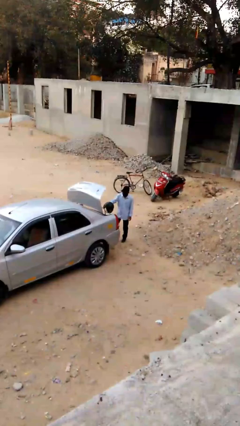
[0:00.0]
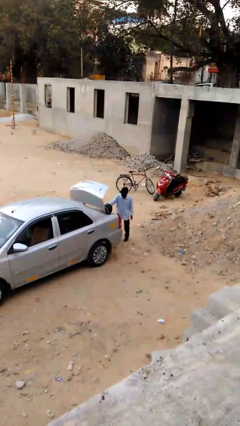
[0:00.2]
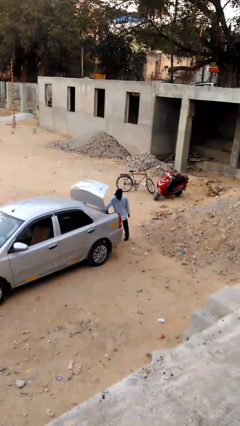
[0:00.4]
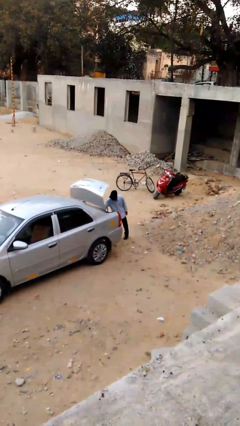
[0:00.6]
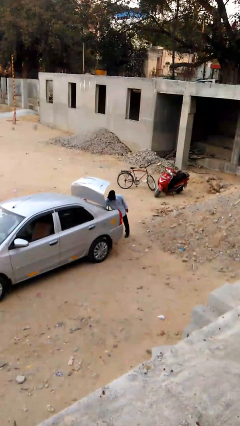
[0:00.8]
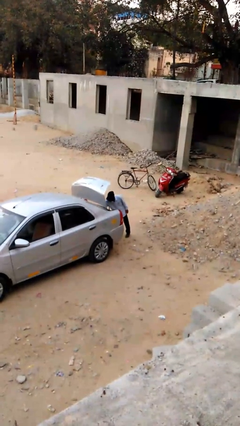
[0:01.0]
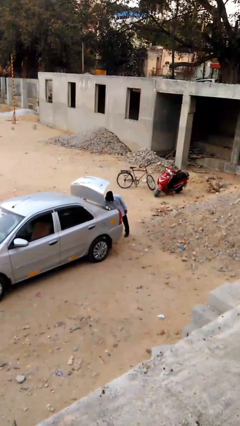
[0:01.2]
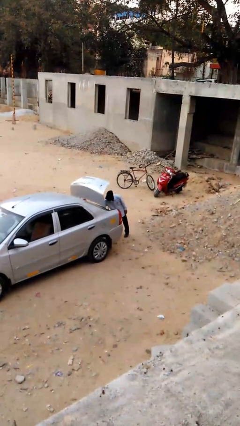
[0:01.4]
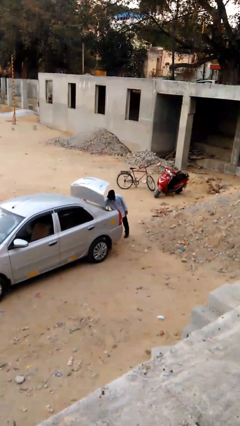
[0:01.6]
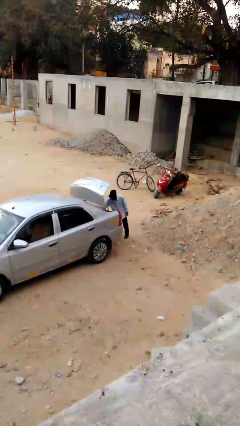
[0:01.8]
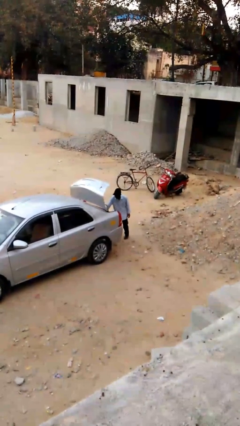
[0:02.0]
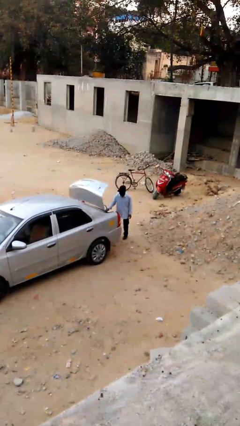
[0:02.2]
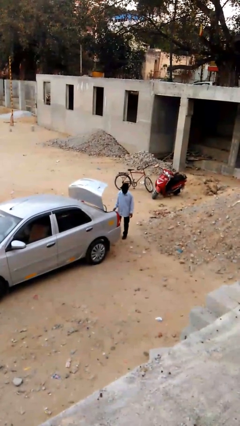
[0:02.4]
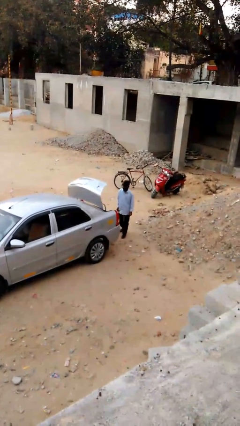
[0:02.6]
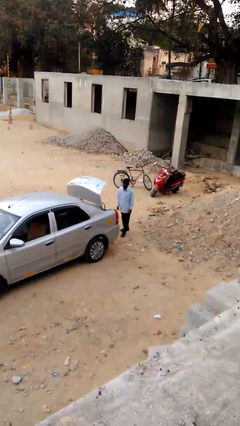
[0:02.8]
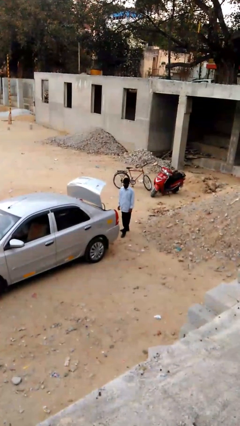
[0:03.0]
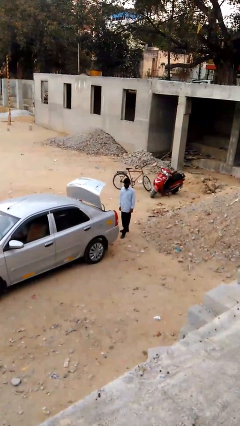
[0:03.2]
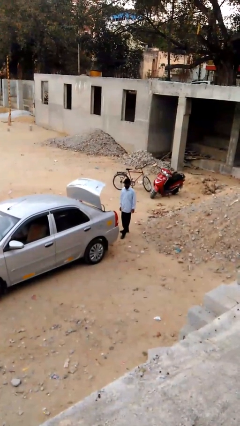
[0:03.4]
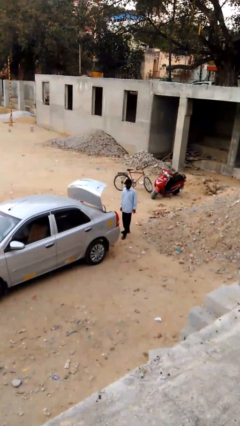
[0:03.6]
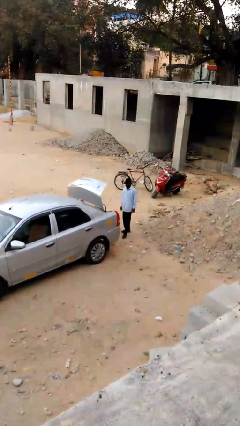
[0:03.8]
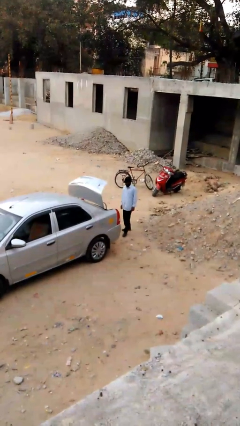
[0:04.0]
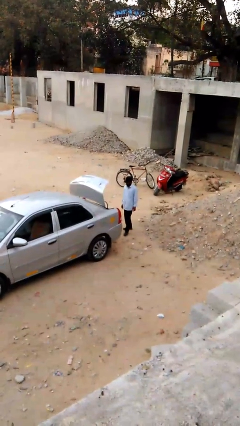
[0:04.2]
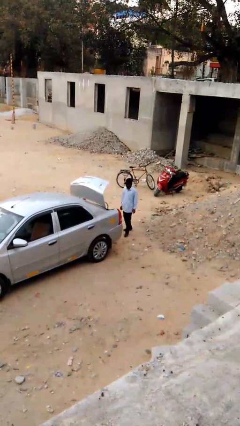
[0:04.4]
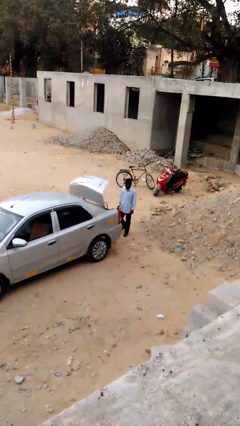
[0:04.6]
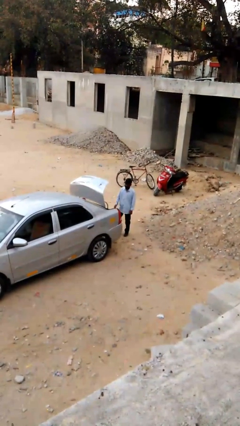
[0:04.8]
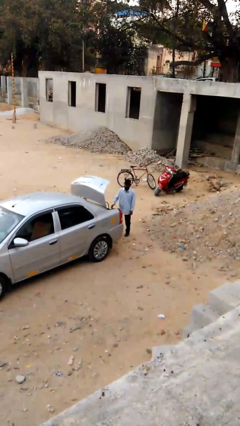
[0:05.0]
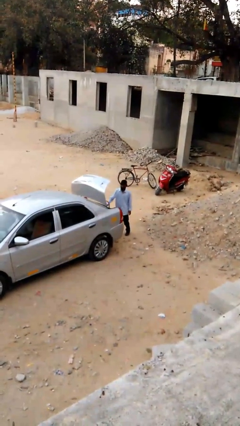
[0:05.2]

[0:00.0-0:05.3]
person loads car

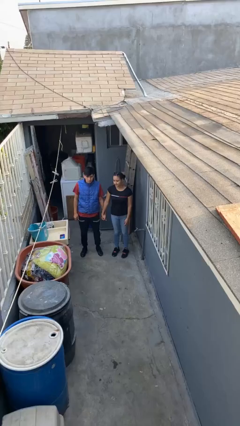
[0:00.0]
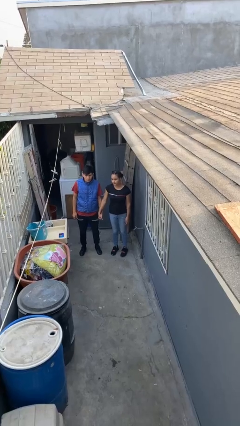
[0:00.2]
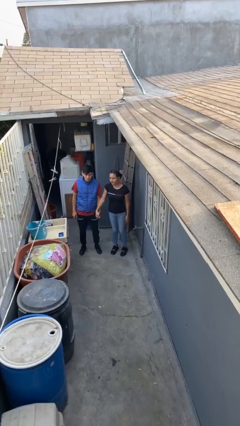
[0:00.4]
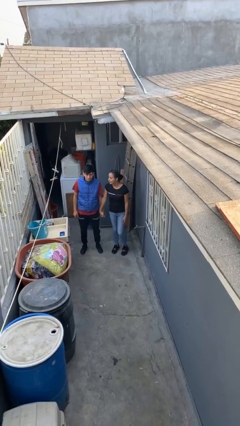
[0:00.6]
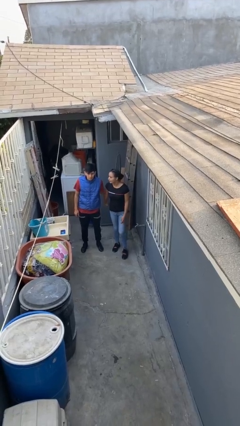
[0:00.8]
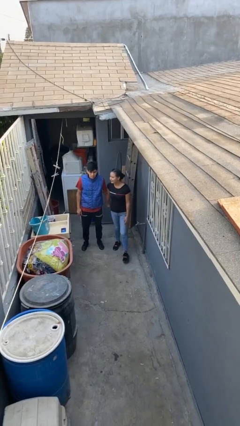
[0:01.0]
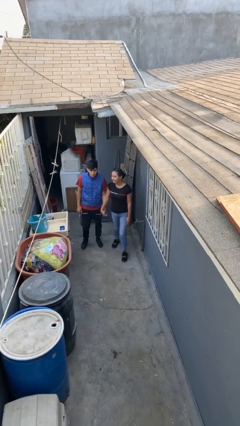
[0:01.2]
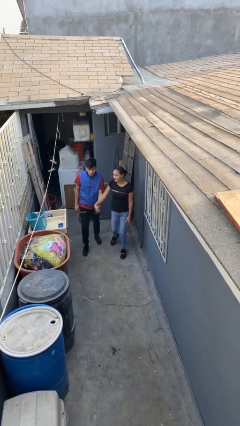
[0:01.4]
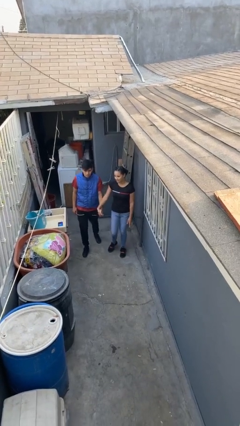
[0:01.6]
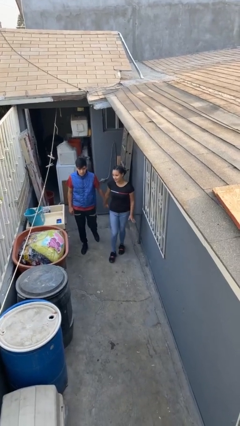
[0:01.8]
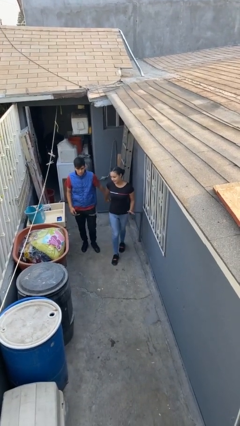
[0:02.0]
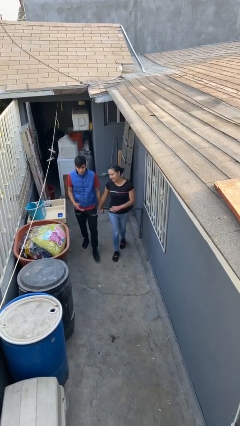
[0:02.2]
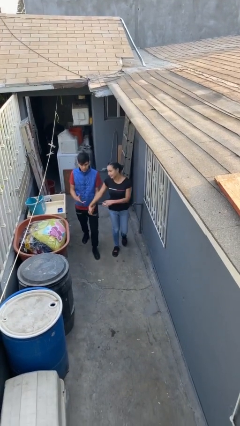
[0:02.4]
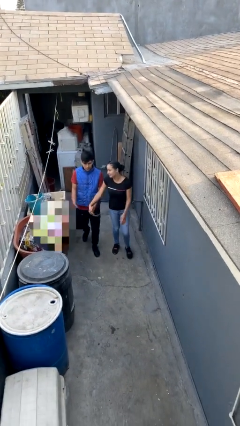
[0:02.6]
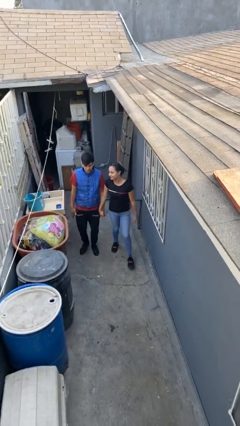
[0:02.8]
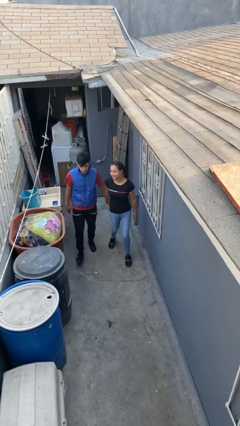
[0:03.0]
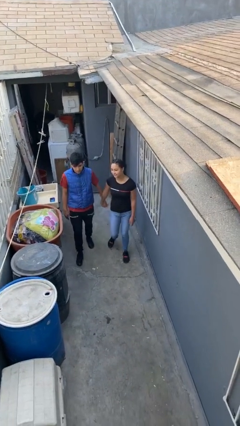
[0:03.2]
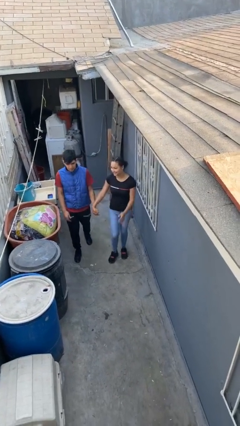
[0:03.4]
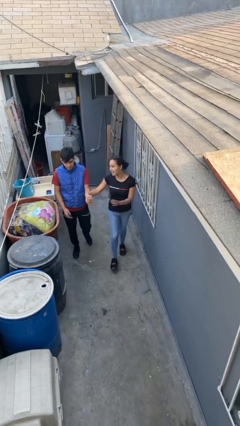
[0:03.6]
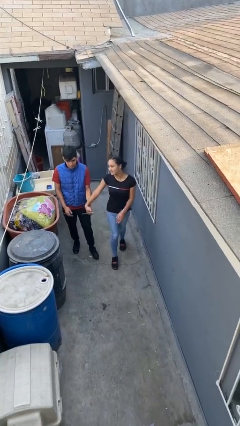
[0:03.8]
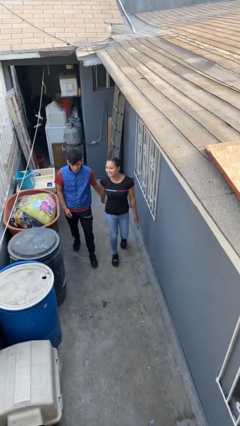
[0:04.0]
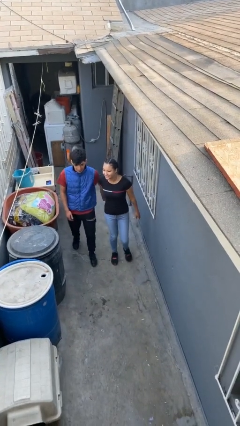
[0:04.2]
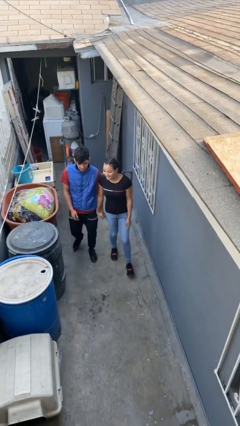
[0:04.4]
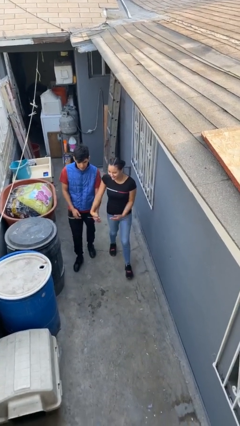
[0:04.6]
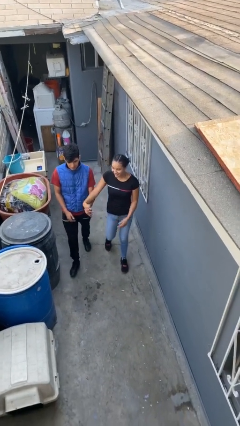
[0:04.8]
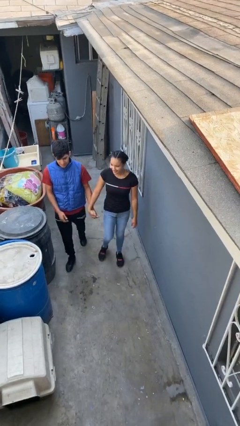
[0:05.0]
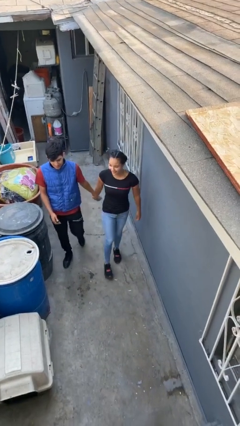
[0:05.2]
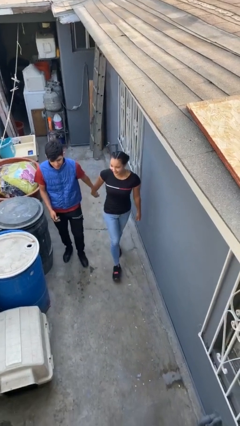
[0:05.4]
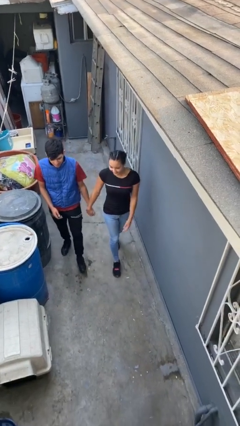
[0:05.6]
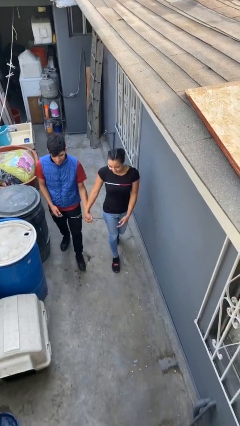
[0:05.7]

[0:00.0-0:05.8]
person holds hand

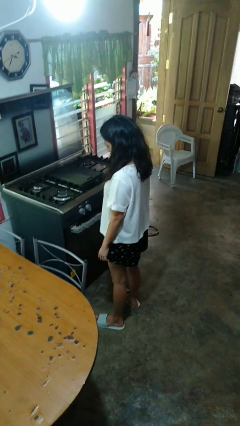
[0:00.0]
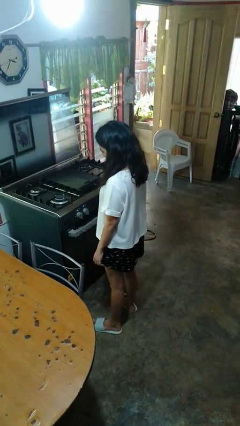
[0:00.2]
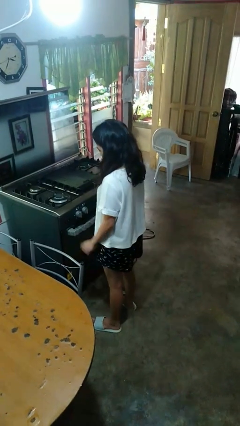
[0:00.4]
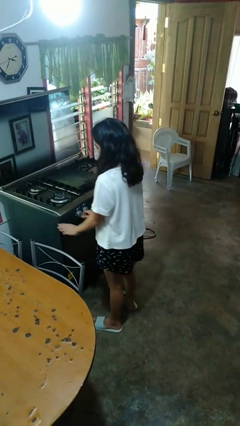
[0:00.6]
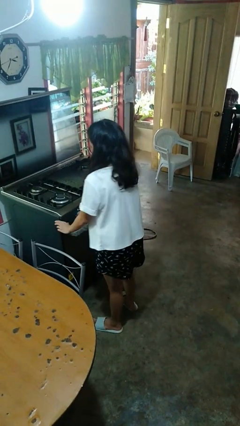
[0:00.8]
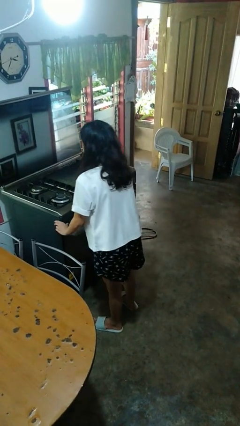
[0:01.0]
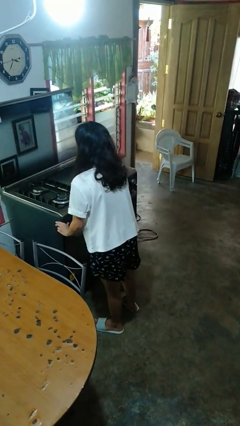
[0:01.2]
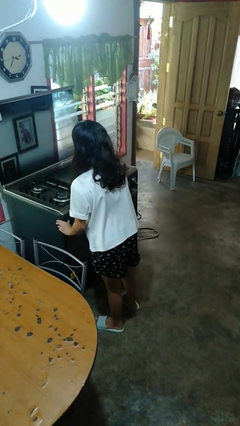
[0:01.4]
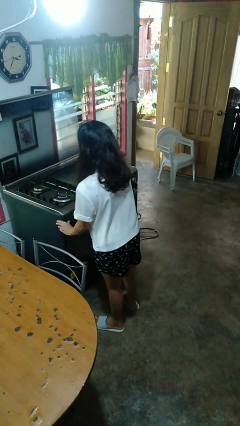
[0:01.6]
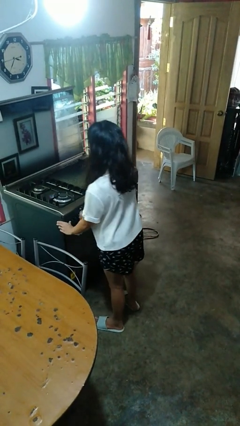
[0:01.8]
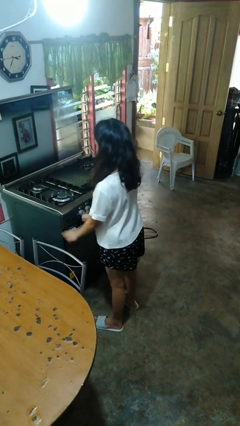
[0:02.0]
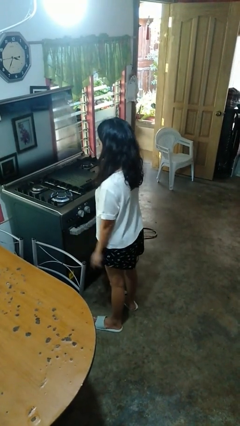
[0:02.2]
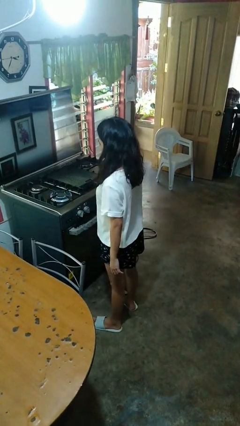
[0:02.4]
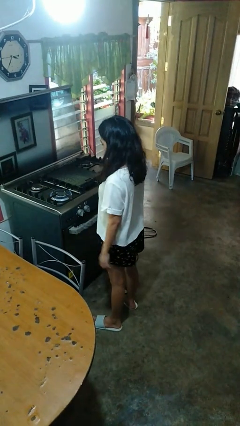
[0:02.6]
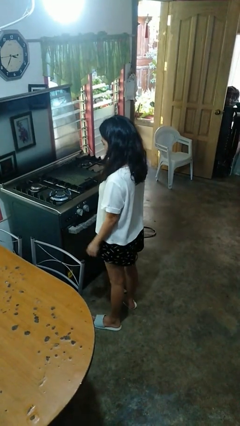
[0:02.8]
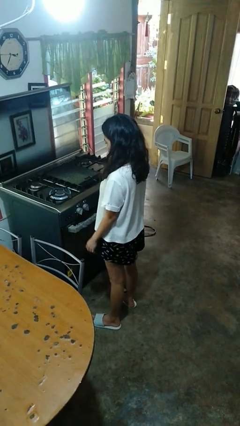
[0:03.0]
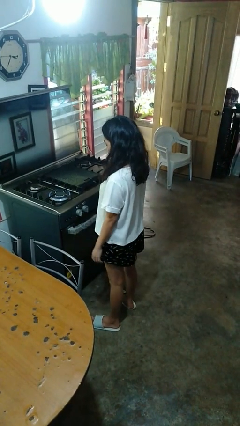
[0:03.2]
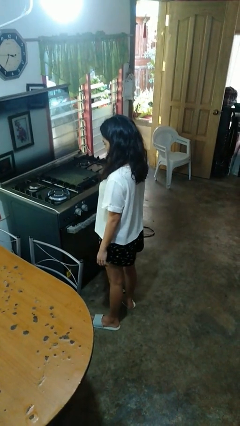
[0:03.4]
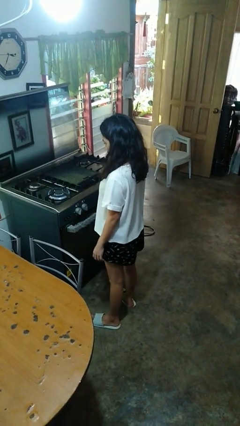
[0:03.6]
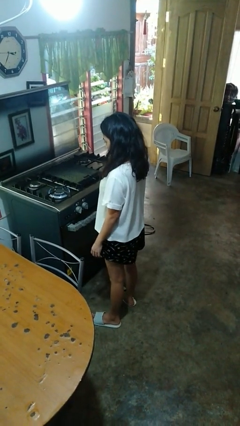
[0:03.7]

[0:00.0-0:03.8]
person turns on stovetop

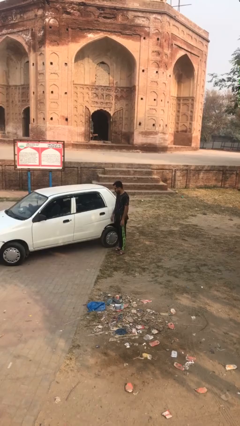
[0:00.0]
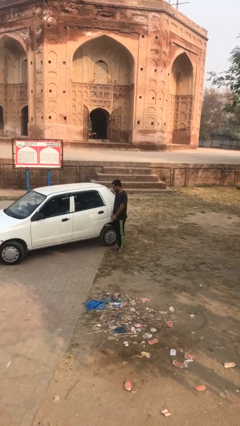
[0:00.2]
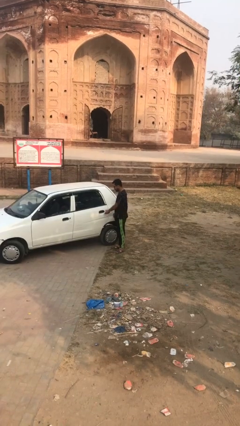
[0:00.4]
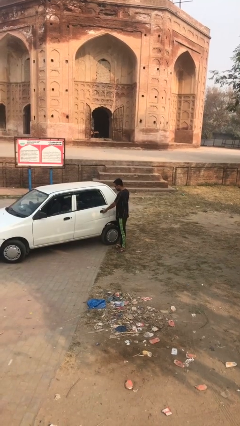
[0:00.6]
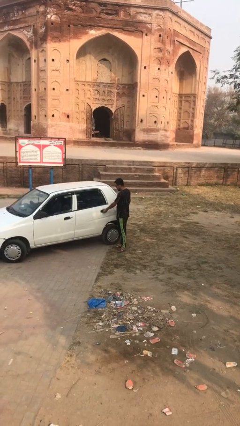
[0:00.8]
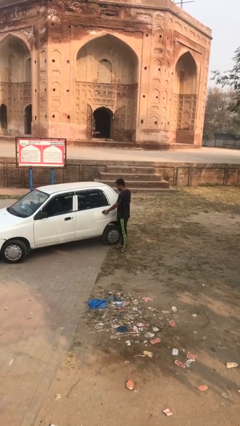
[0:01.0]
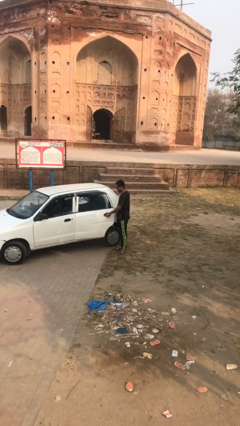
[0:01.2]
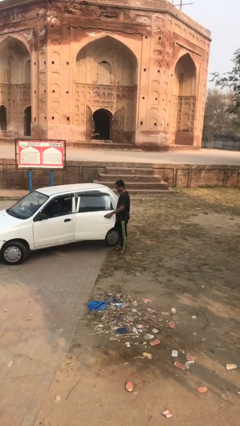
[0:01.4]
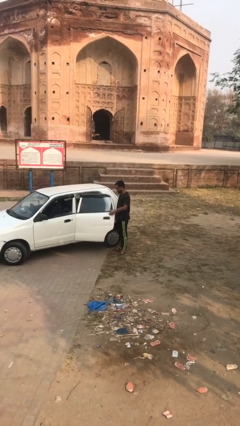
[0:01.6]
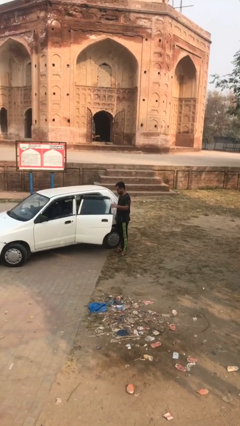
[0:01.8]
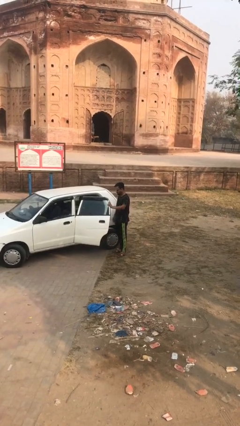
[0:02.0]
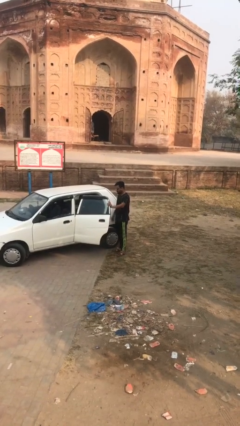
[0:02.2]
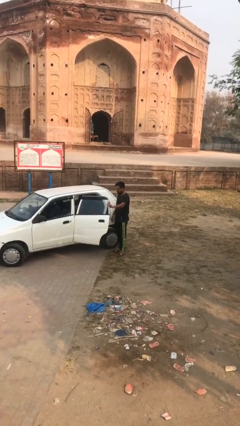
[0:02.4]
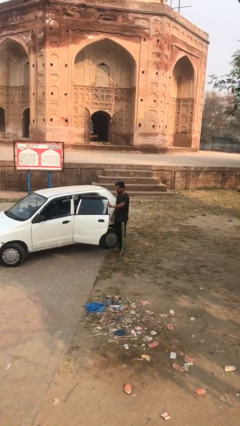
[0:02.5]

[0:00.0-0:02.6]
person opens car door
